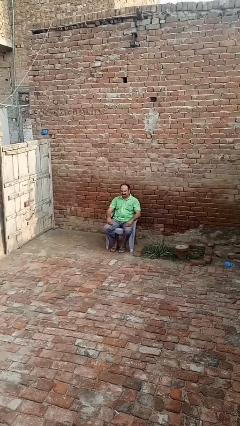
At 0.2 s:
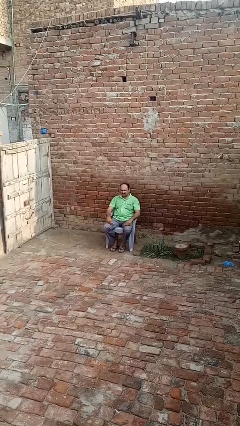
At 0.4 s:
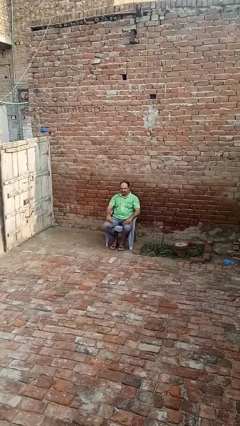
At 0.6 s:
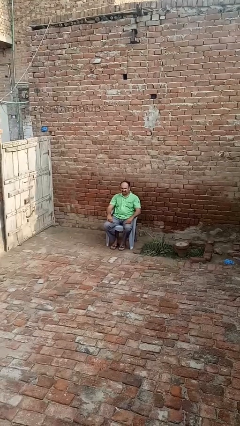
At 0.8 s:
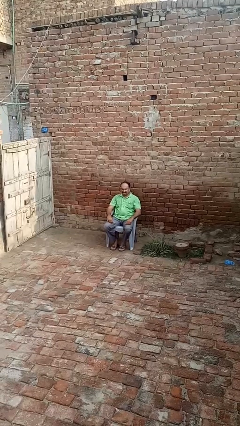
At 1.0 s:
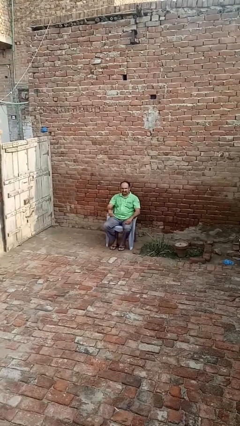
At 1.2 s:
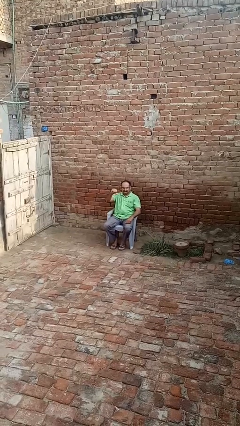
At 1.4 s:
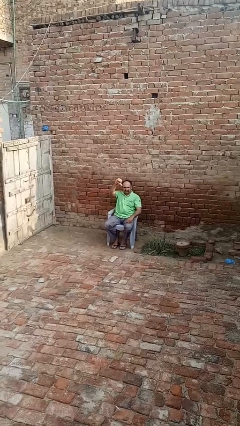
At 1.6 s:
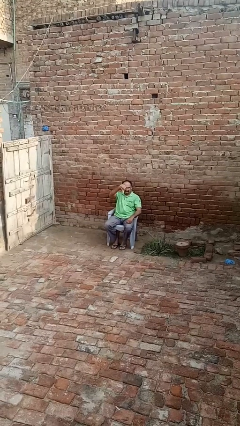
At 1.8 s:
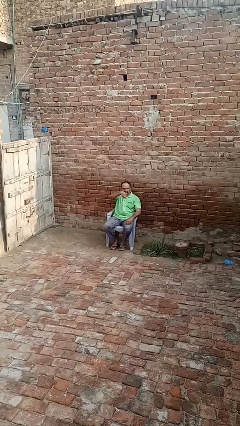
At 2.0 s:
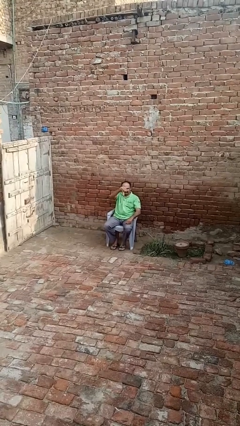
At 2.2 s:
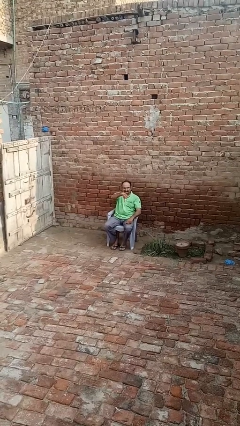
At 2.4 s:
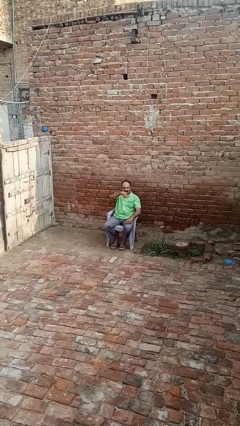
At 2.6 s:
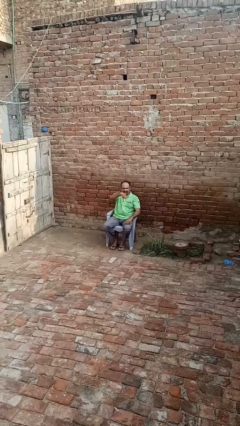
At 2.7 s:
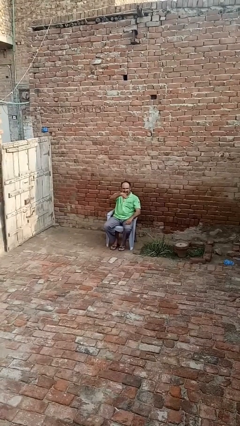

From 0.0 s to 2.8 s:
person gestures thumbs down

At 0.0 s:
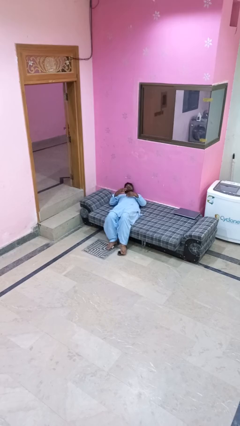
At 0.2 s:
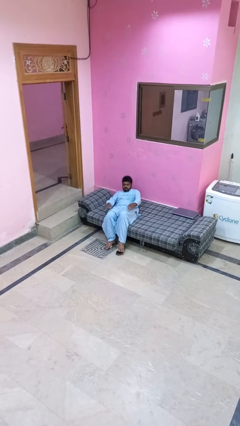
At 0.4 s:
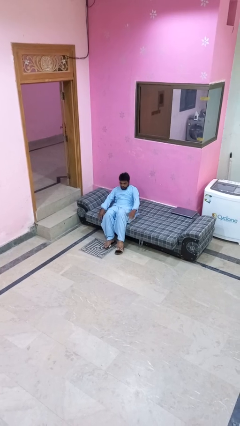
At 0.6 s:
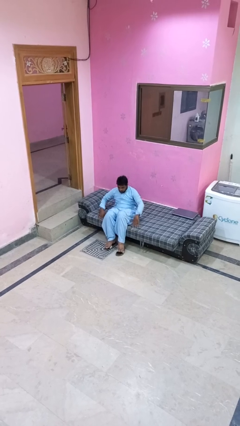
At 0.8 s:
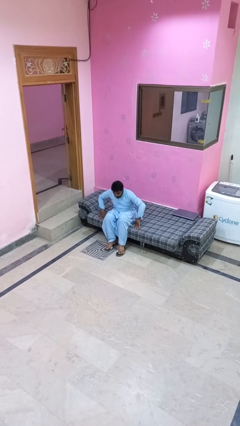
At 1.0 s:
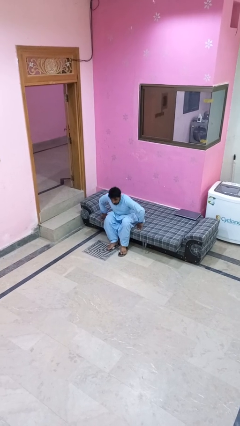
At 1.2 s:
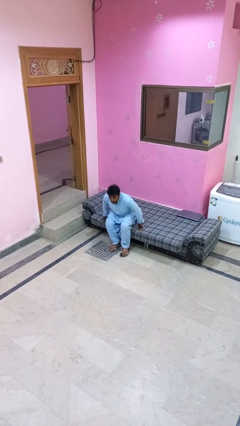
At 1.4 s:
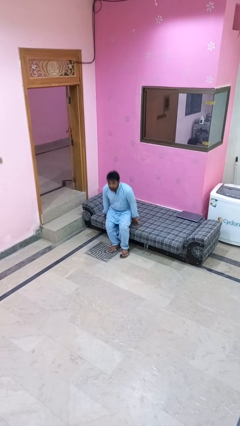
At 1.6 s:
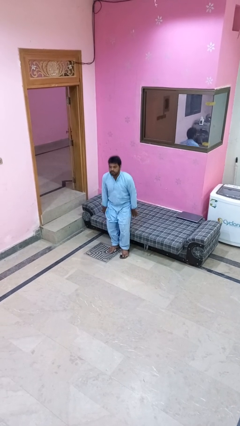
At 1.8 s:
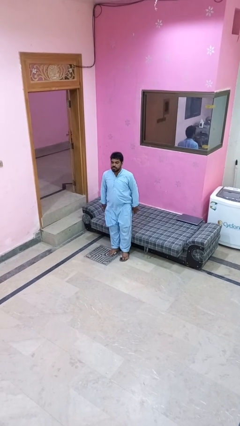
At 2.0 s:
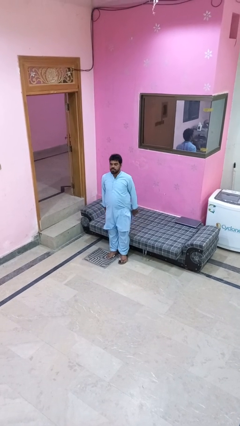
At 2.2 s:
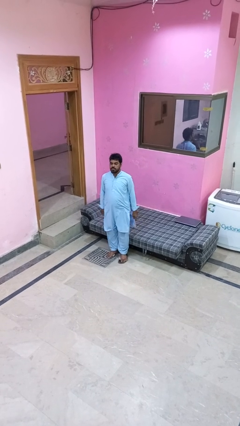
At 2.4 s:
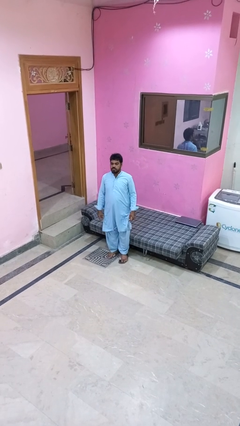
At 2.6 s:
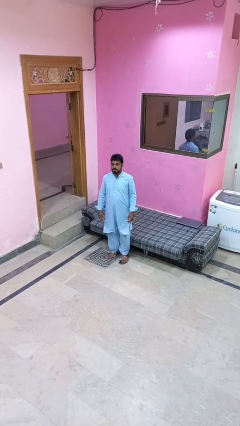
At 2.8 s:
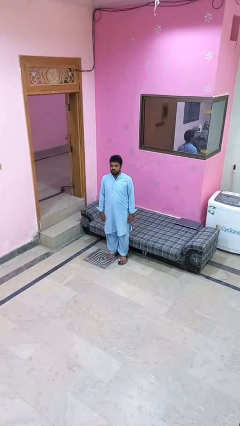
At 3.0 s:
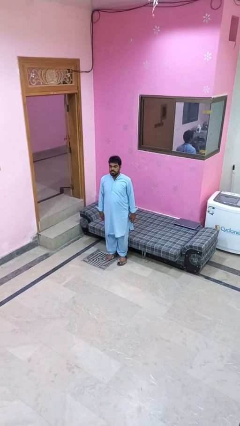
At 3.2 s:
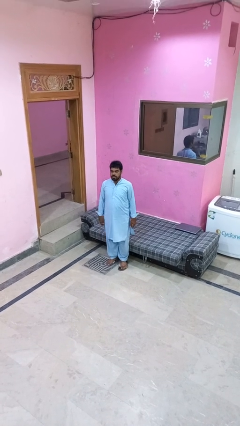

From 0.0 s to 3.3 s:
person stands up

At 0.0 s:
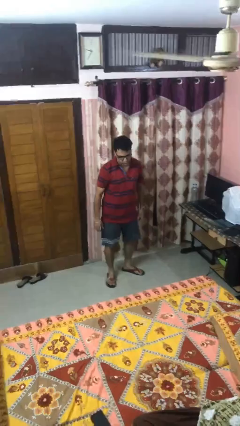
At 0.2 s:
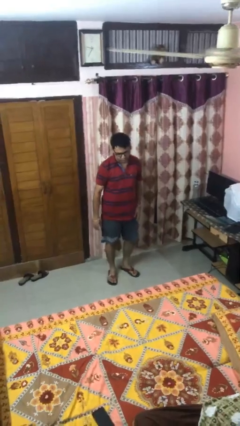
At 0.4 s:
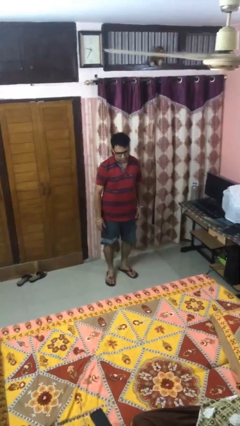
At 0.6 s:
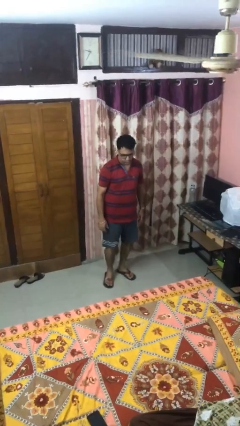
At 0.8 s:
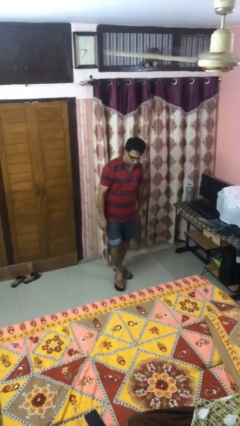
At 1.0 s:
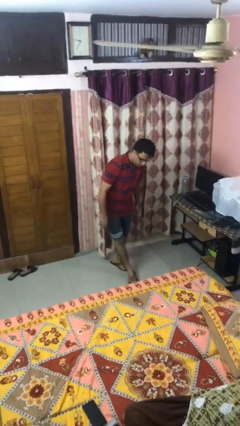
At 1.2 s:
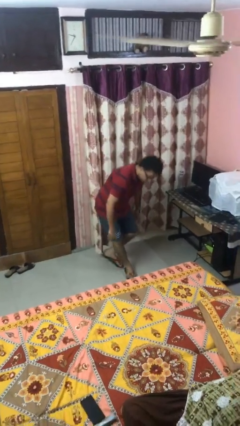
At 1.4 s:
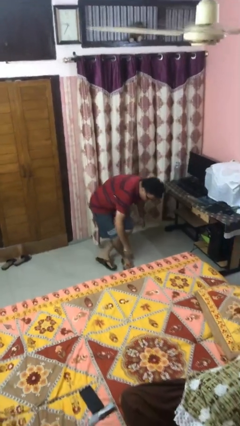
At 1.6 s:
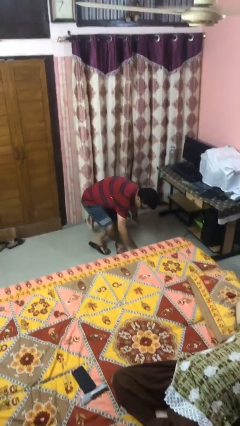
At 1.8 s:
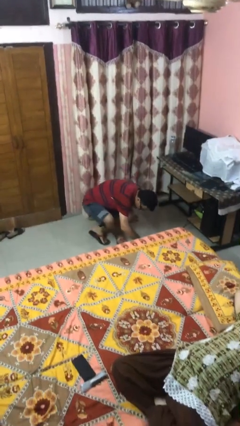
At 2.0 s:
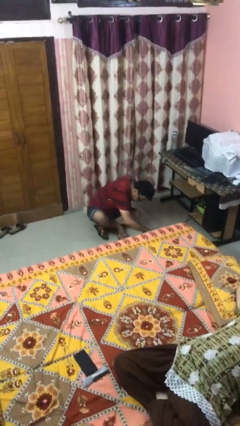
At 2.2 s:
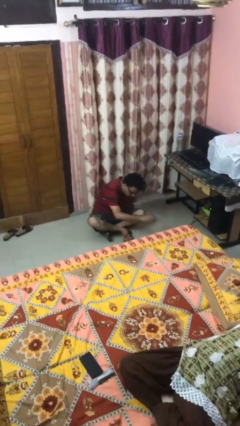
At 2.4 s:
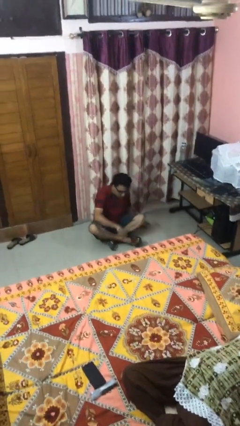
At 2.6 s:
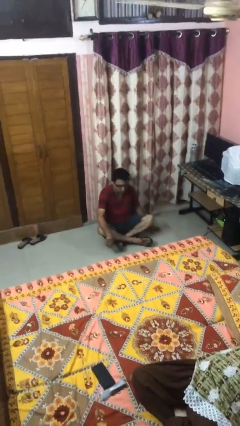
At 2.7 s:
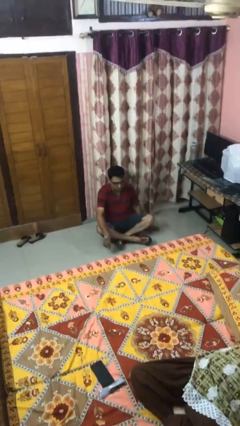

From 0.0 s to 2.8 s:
person sits crisscross

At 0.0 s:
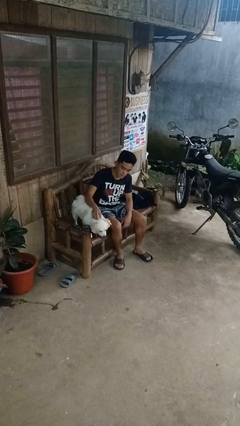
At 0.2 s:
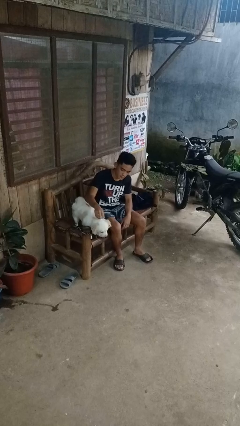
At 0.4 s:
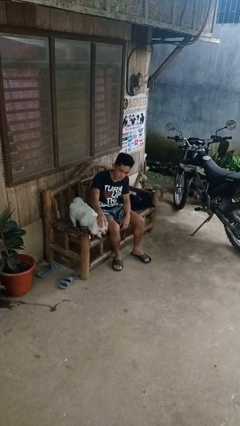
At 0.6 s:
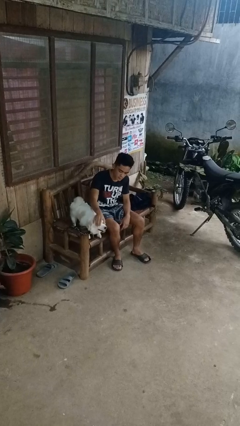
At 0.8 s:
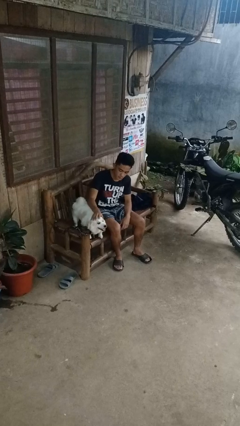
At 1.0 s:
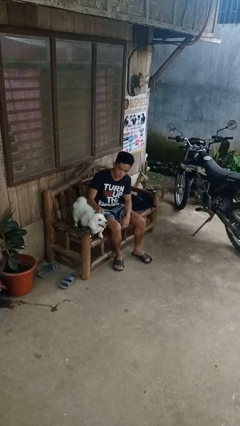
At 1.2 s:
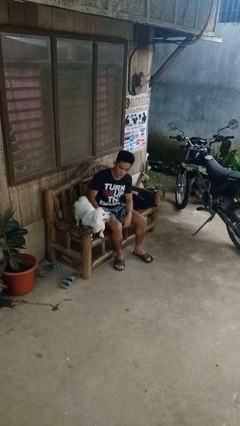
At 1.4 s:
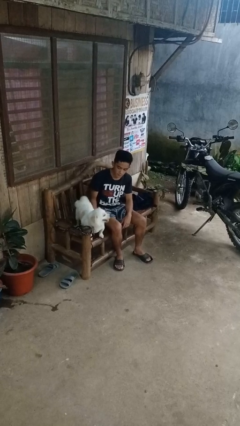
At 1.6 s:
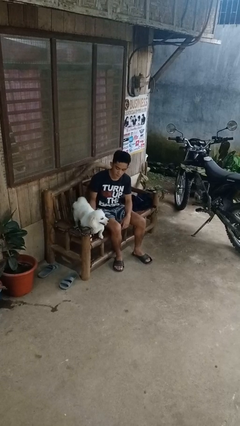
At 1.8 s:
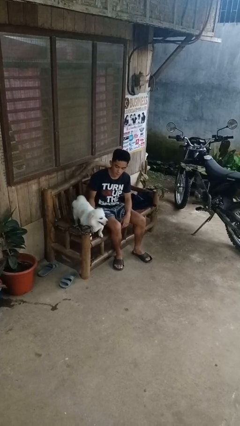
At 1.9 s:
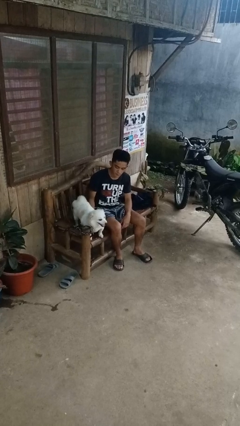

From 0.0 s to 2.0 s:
person pets dog

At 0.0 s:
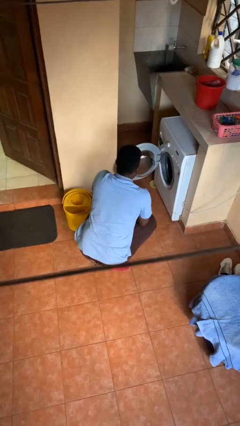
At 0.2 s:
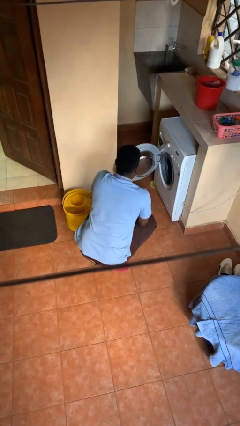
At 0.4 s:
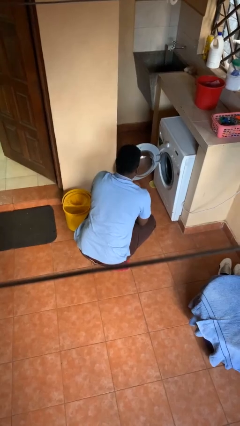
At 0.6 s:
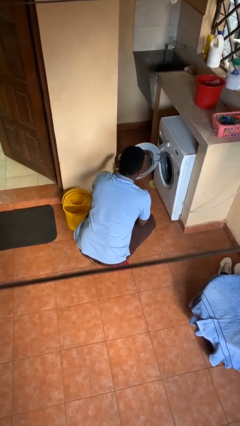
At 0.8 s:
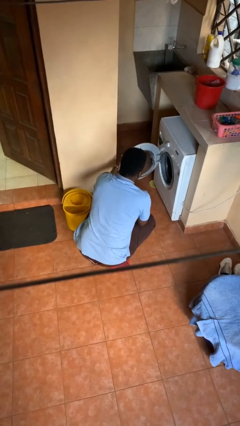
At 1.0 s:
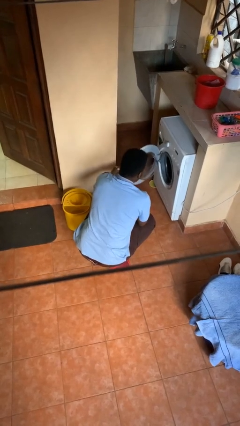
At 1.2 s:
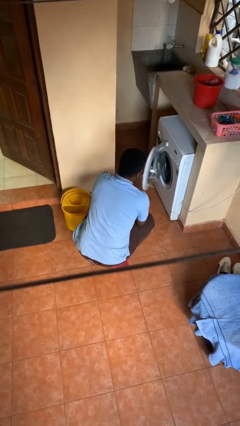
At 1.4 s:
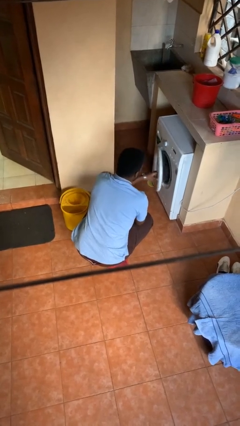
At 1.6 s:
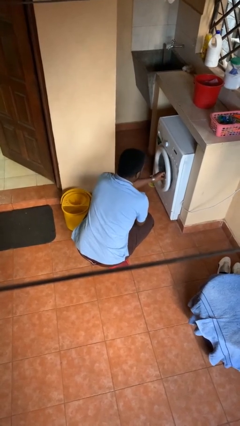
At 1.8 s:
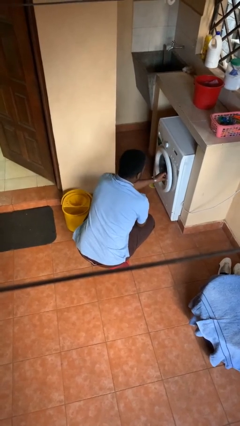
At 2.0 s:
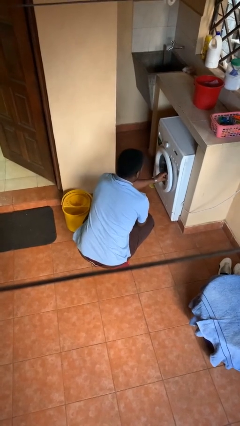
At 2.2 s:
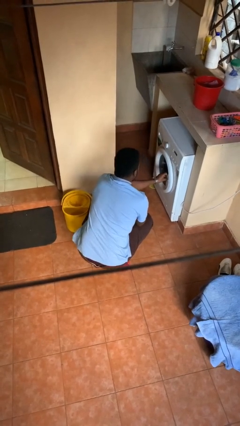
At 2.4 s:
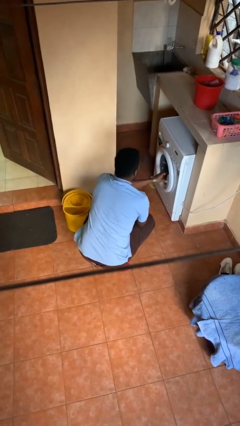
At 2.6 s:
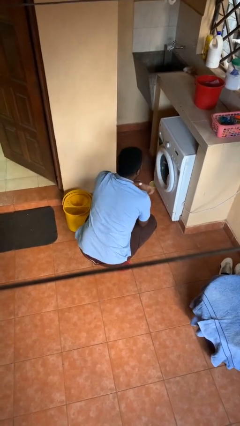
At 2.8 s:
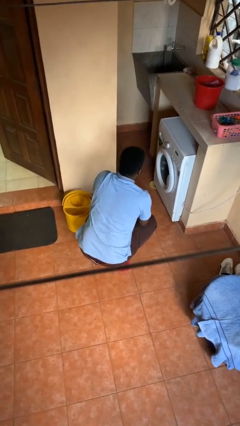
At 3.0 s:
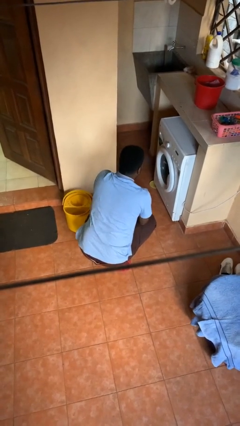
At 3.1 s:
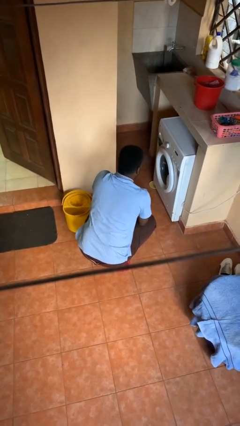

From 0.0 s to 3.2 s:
person closes clothes washer

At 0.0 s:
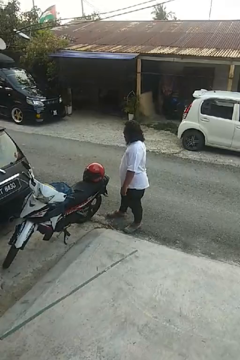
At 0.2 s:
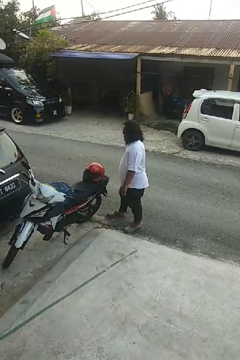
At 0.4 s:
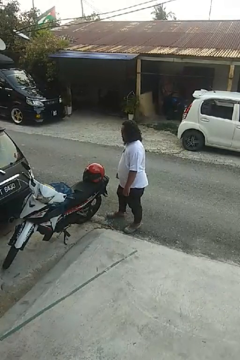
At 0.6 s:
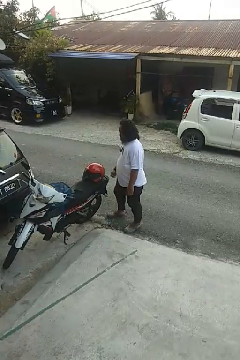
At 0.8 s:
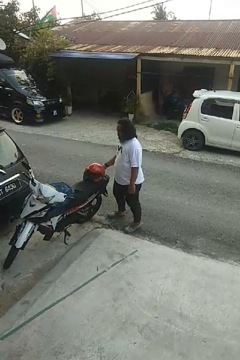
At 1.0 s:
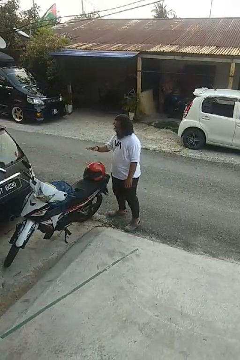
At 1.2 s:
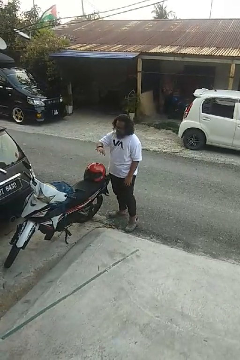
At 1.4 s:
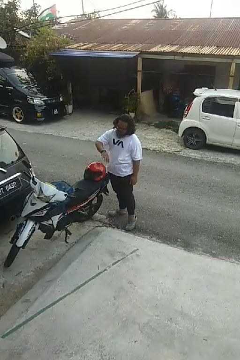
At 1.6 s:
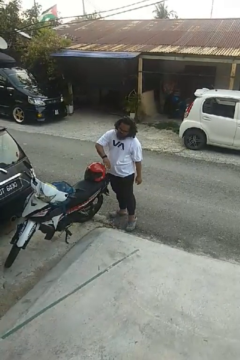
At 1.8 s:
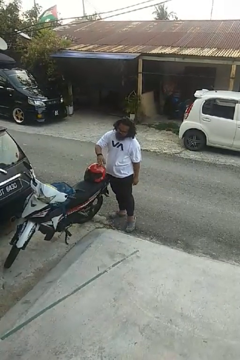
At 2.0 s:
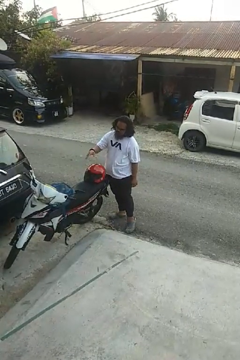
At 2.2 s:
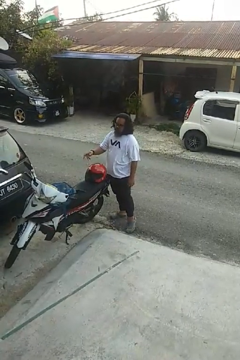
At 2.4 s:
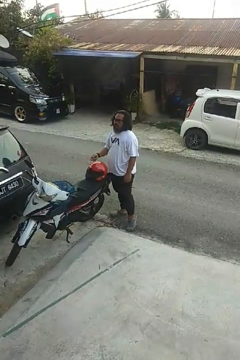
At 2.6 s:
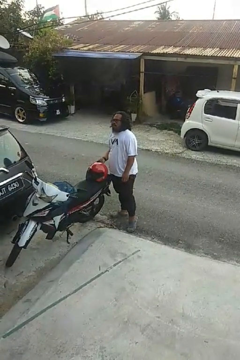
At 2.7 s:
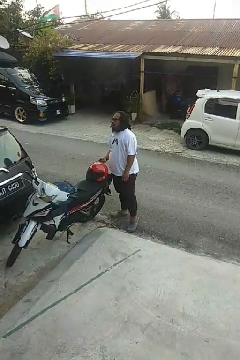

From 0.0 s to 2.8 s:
person waves hand over object

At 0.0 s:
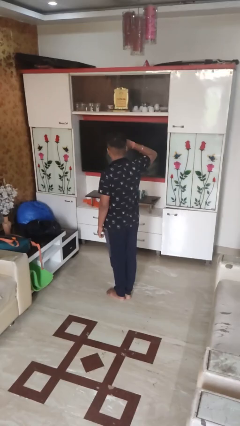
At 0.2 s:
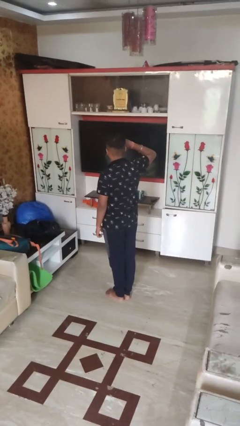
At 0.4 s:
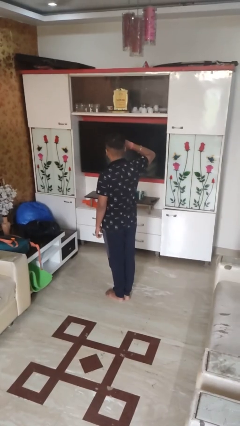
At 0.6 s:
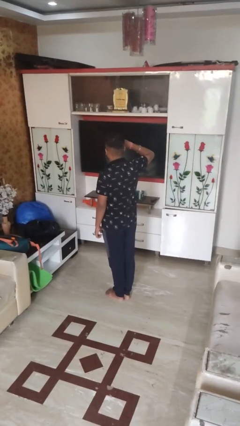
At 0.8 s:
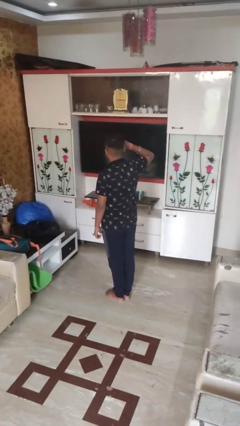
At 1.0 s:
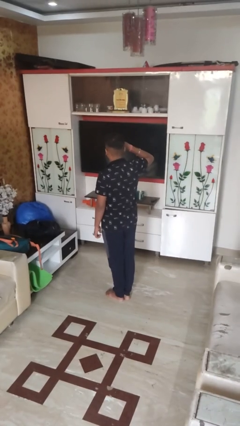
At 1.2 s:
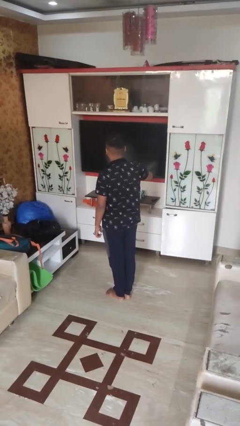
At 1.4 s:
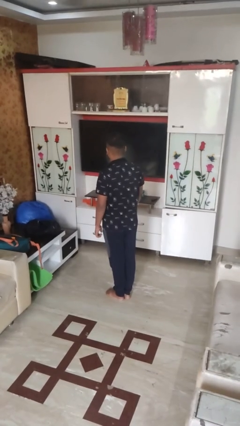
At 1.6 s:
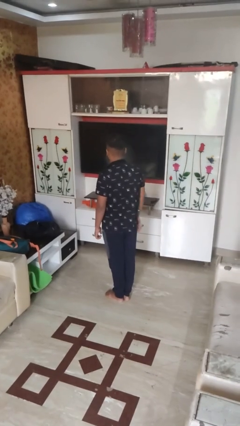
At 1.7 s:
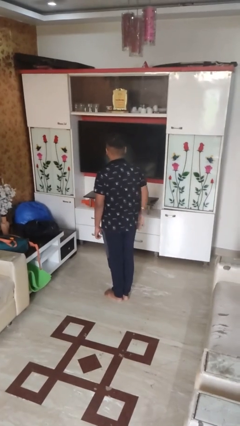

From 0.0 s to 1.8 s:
person salutes
